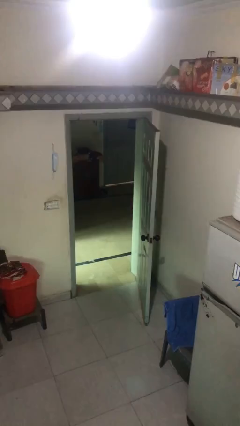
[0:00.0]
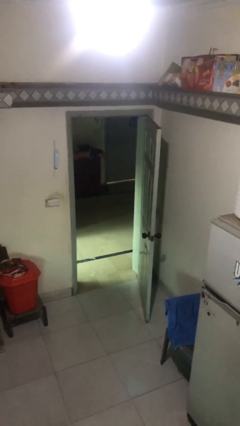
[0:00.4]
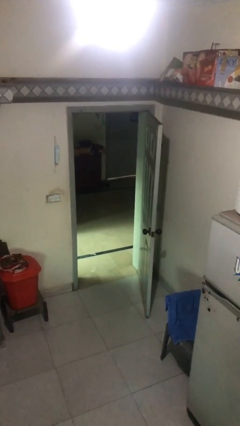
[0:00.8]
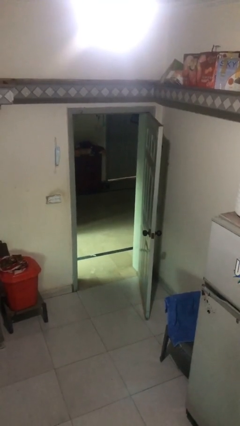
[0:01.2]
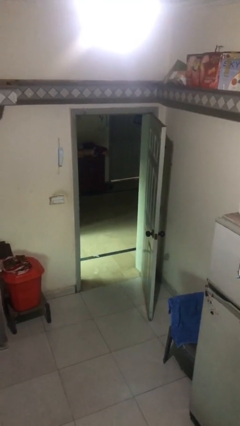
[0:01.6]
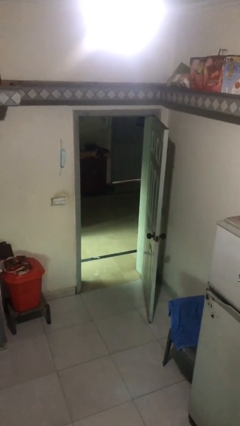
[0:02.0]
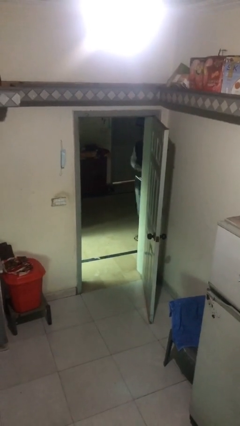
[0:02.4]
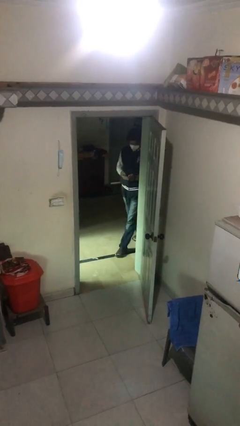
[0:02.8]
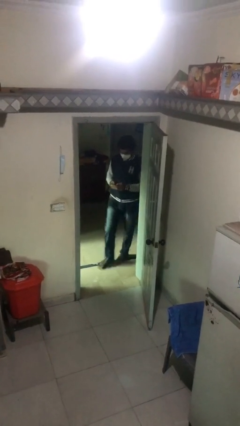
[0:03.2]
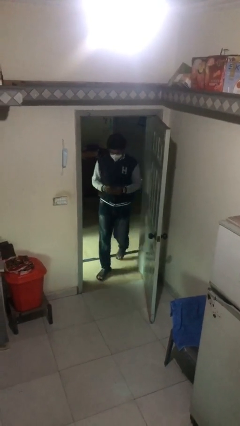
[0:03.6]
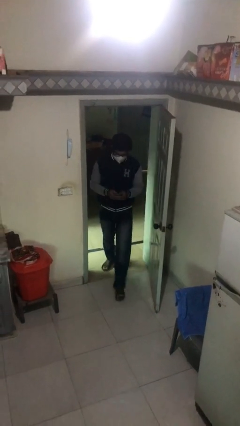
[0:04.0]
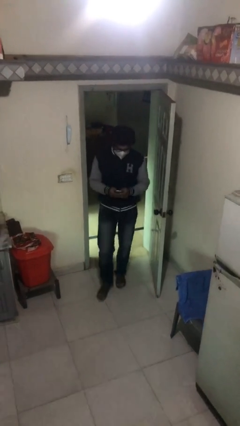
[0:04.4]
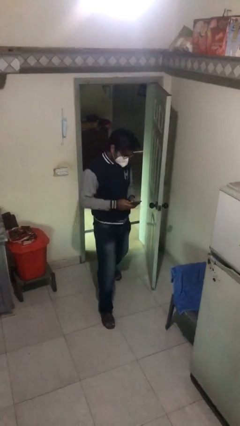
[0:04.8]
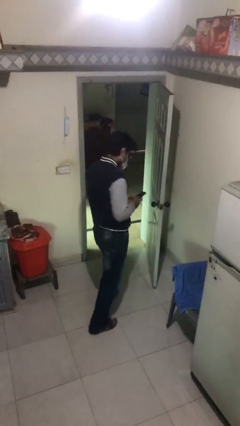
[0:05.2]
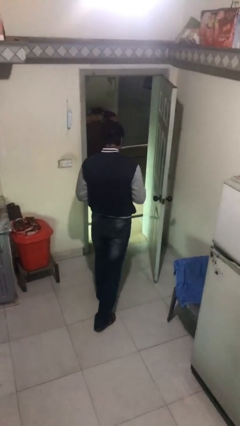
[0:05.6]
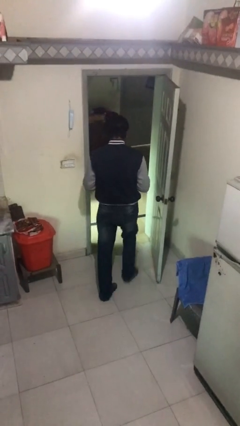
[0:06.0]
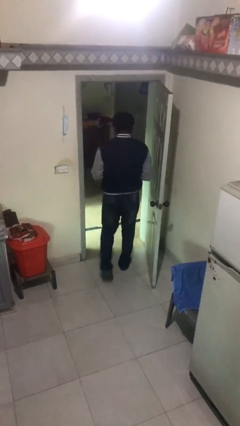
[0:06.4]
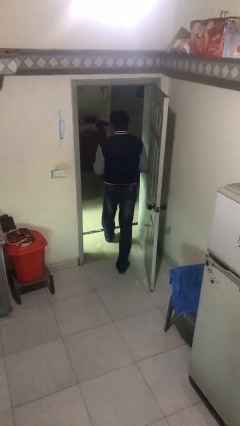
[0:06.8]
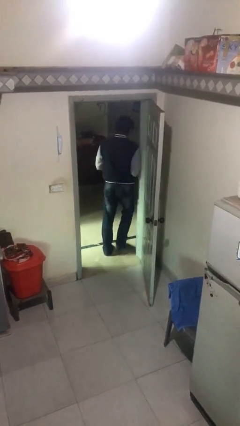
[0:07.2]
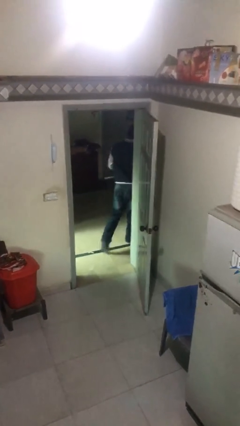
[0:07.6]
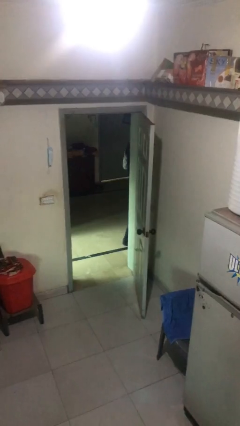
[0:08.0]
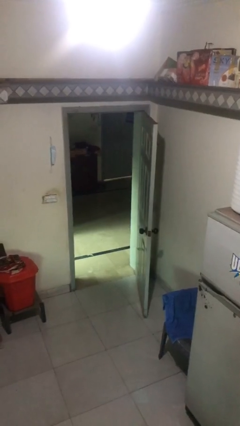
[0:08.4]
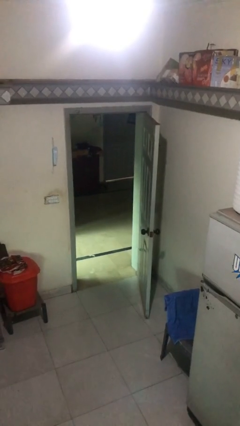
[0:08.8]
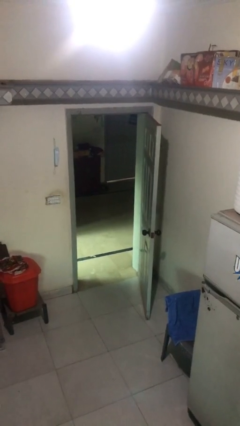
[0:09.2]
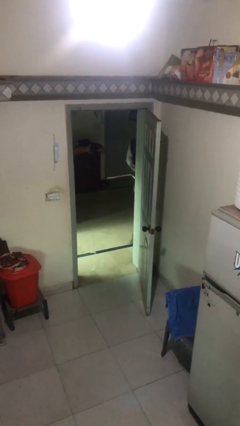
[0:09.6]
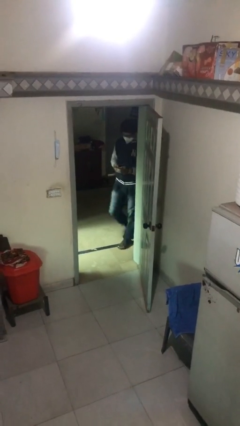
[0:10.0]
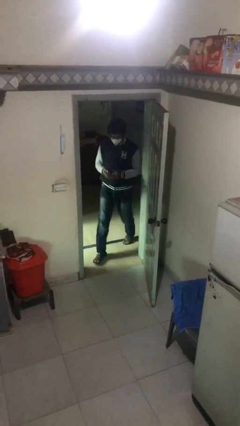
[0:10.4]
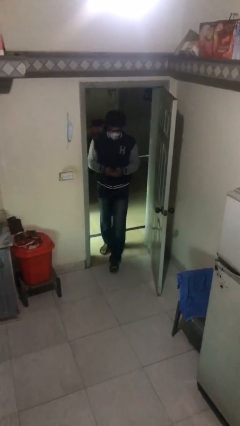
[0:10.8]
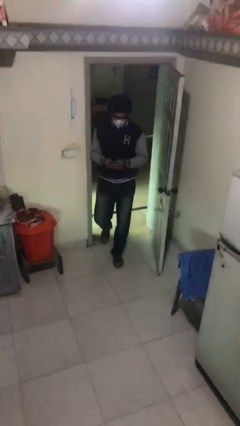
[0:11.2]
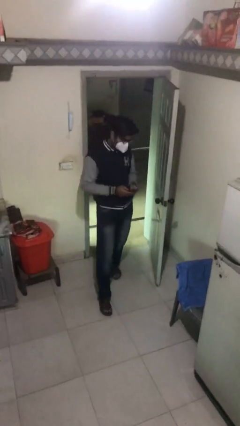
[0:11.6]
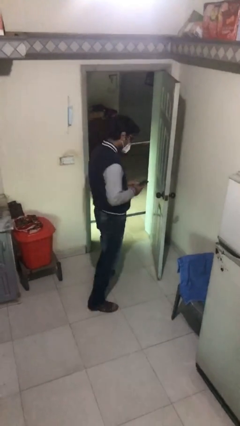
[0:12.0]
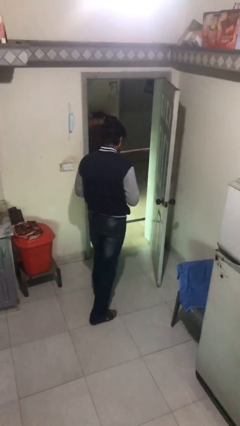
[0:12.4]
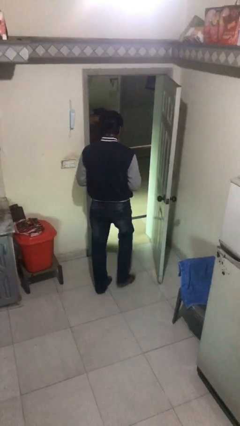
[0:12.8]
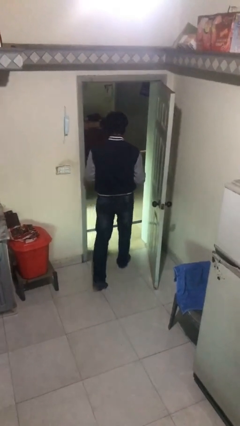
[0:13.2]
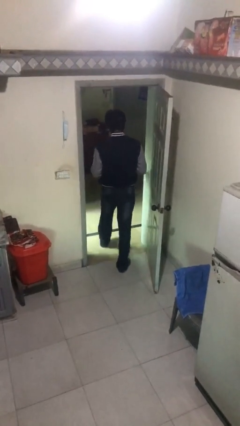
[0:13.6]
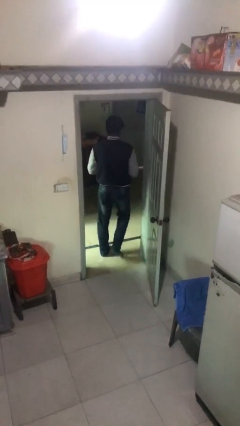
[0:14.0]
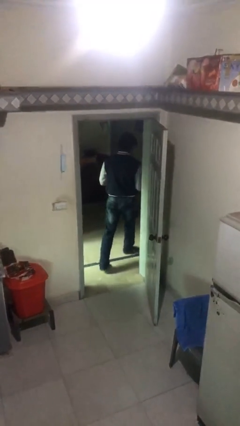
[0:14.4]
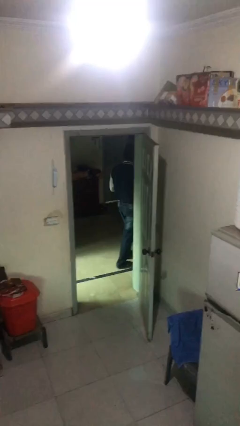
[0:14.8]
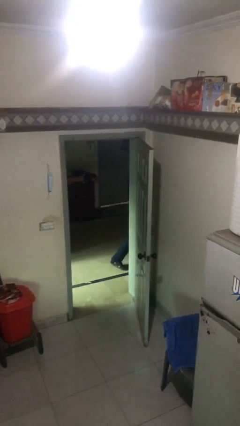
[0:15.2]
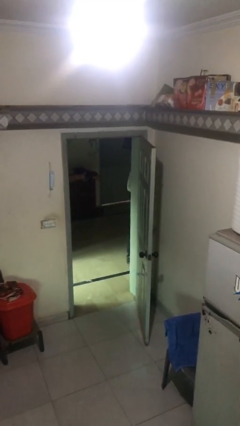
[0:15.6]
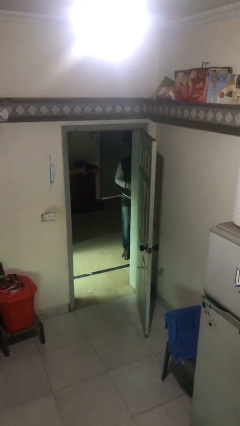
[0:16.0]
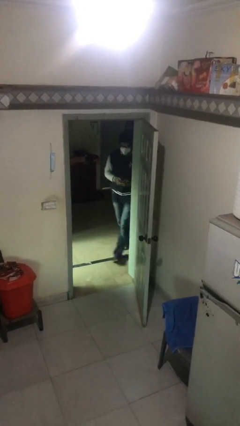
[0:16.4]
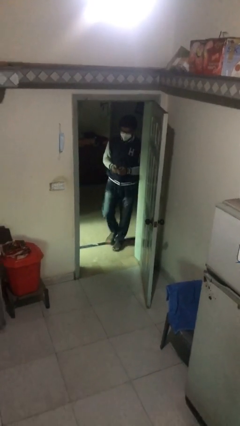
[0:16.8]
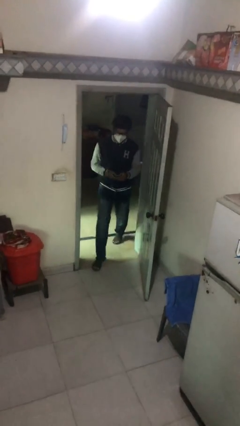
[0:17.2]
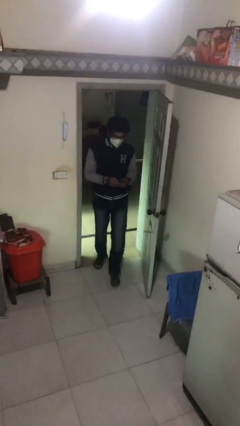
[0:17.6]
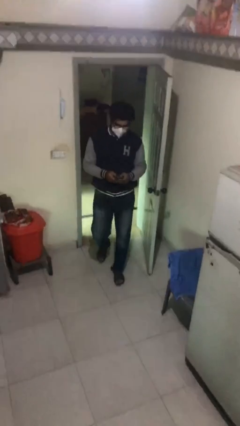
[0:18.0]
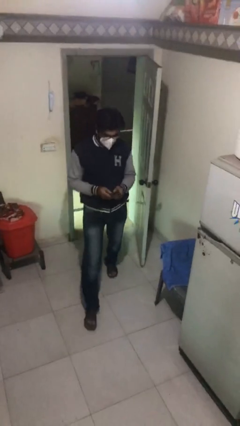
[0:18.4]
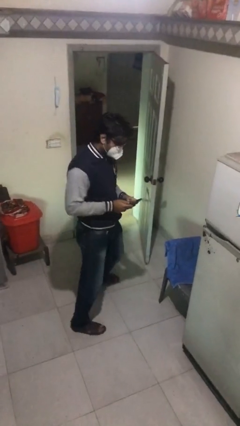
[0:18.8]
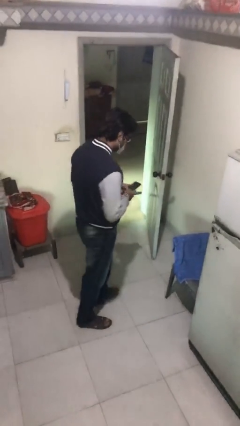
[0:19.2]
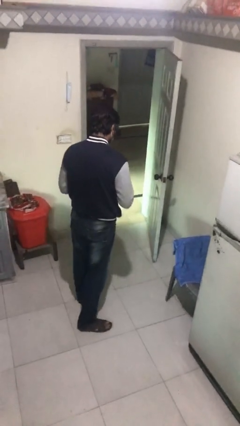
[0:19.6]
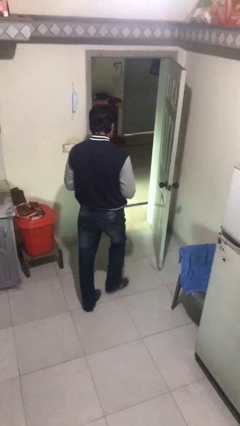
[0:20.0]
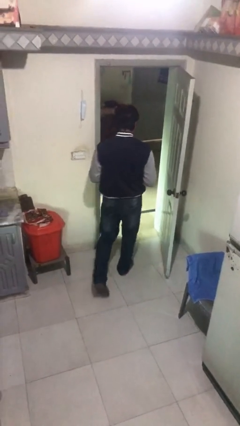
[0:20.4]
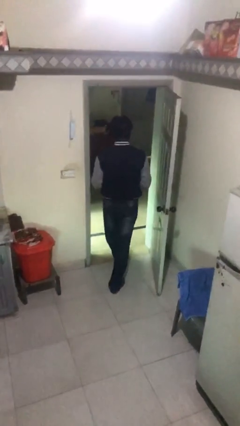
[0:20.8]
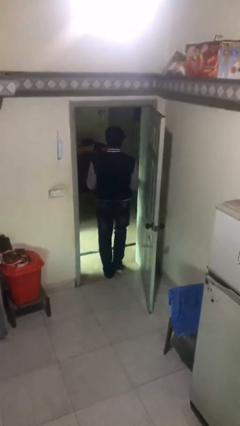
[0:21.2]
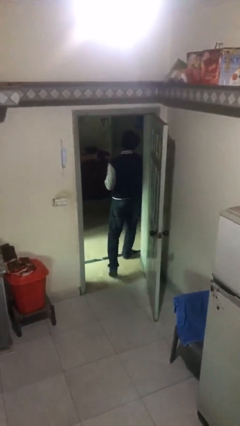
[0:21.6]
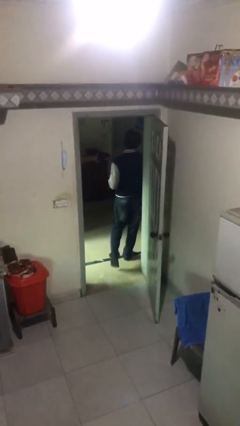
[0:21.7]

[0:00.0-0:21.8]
person texts on phone

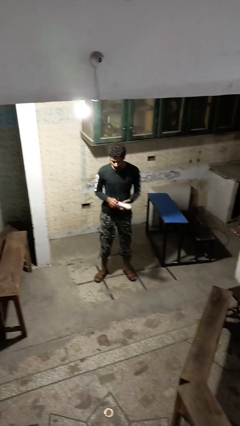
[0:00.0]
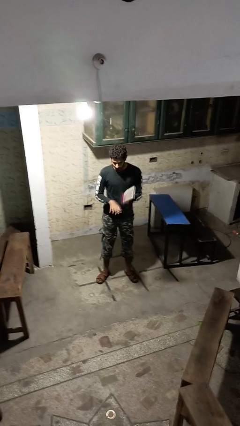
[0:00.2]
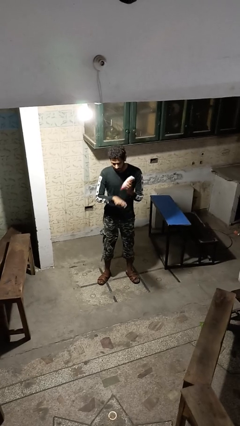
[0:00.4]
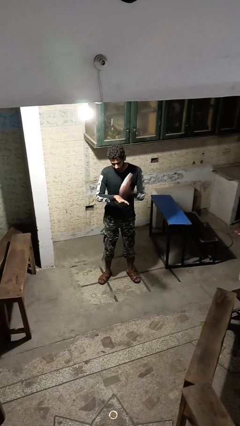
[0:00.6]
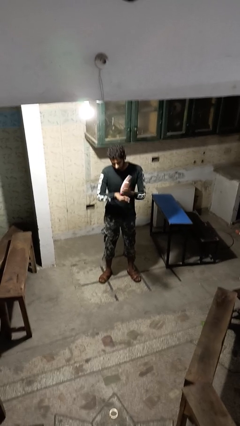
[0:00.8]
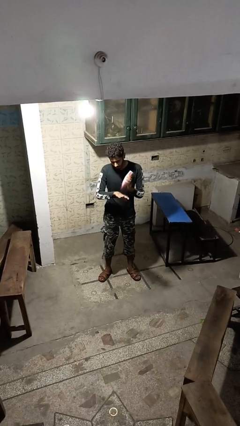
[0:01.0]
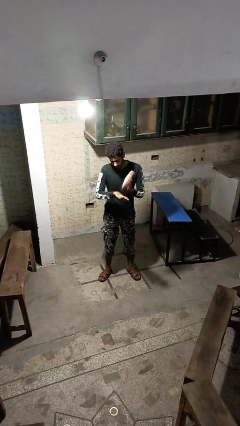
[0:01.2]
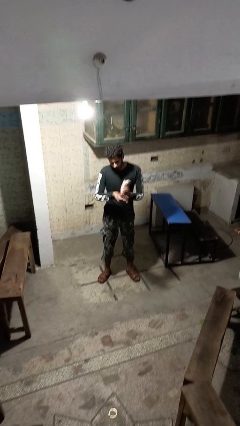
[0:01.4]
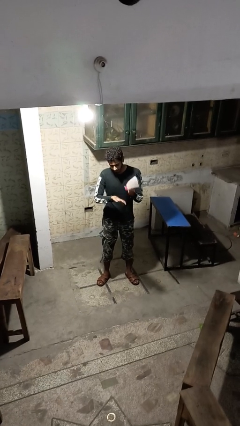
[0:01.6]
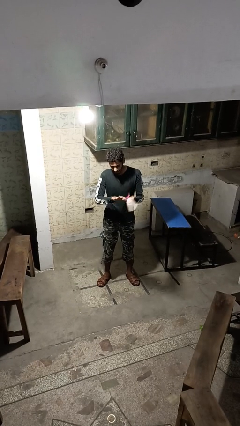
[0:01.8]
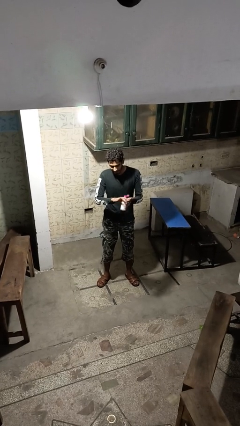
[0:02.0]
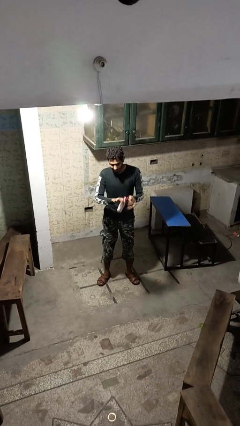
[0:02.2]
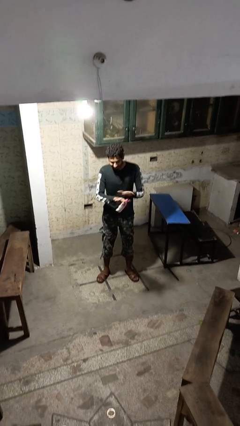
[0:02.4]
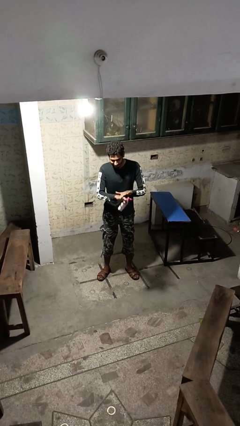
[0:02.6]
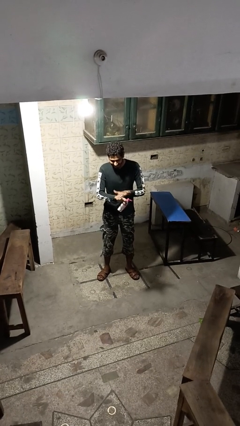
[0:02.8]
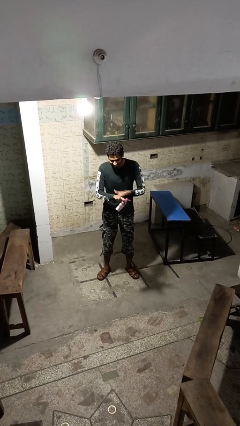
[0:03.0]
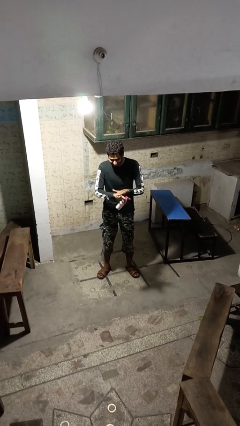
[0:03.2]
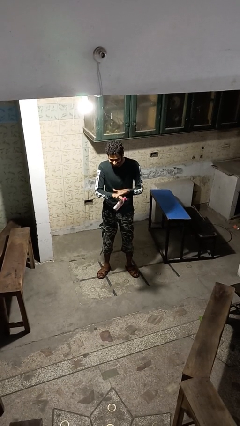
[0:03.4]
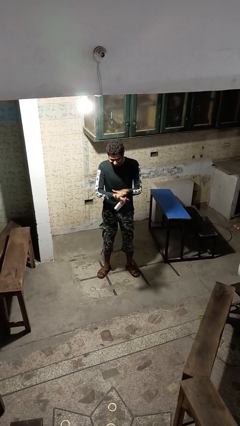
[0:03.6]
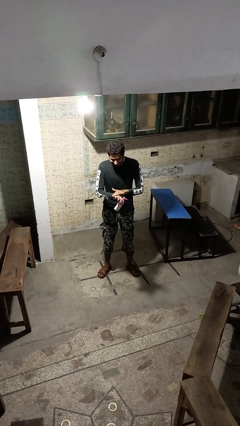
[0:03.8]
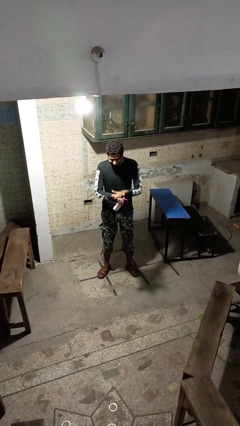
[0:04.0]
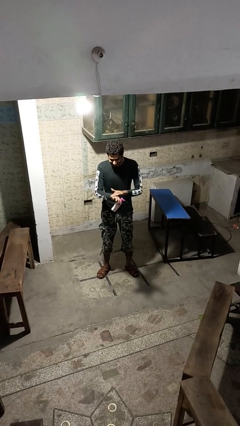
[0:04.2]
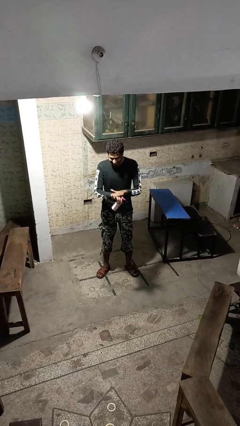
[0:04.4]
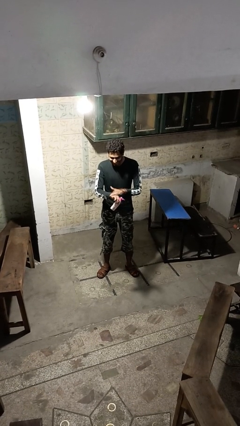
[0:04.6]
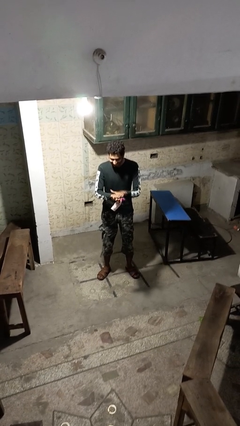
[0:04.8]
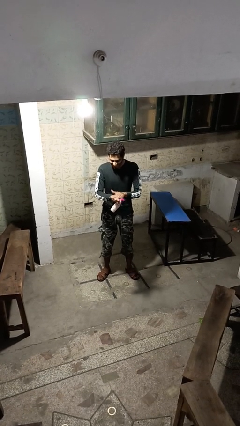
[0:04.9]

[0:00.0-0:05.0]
person applies sunscreen

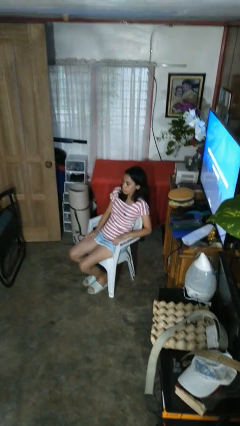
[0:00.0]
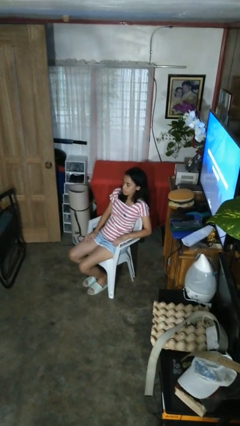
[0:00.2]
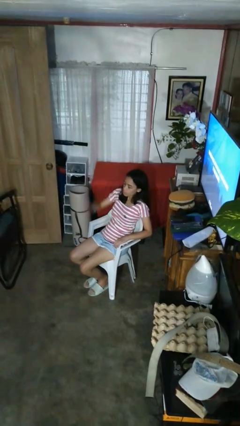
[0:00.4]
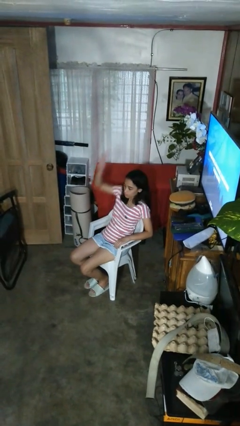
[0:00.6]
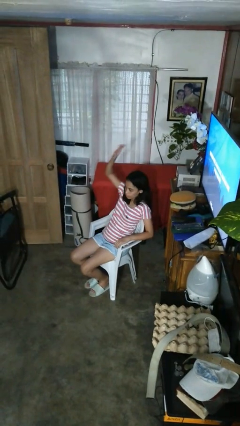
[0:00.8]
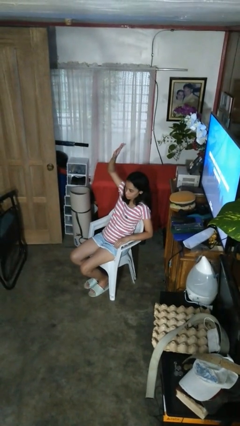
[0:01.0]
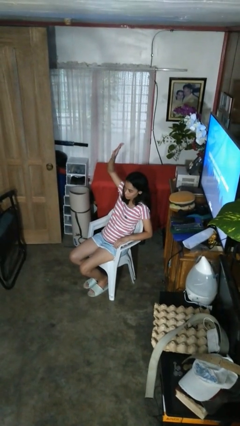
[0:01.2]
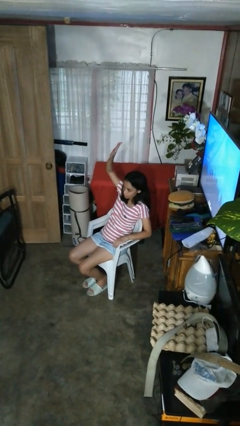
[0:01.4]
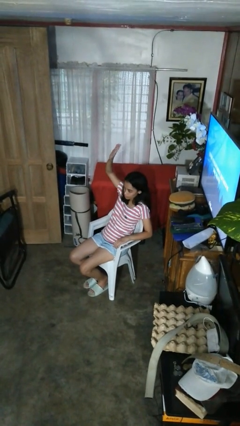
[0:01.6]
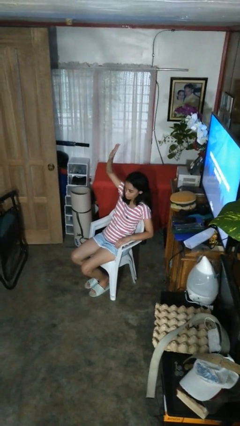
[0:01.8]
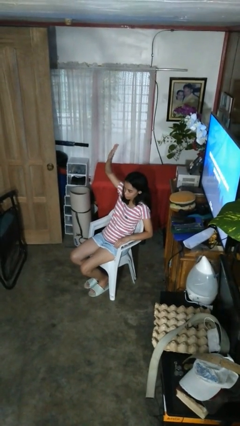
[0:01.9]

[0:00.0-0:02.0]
person gestures raise hand
